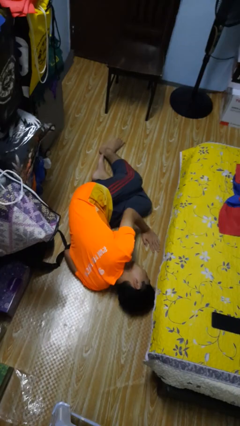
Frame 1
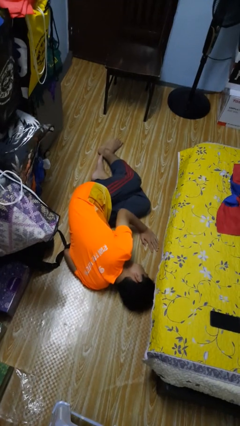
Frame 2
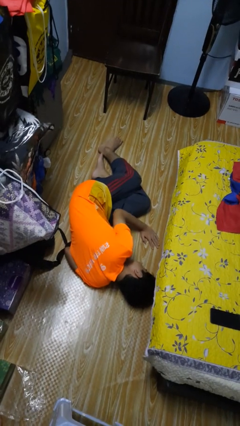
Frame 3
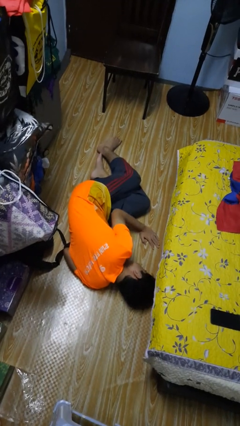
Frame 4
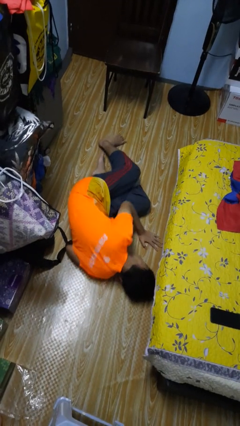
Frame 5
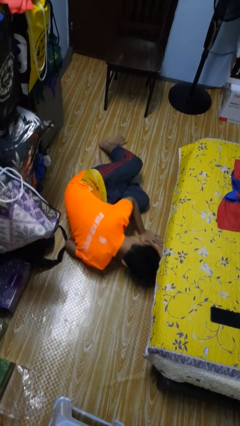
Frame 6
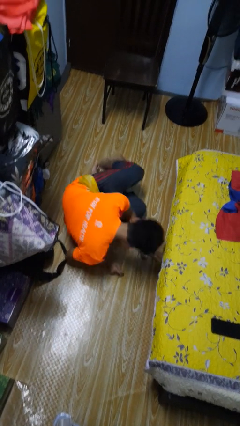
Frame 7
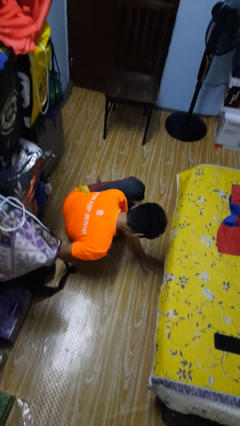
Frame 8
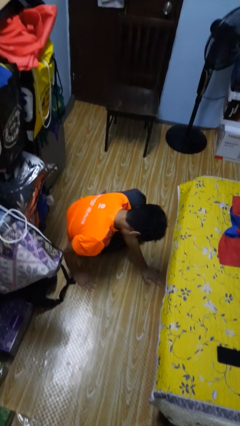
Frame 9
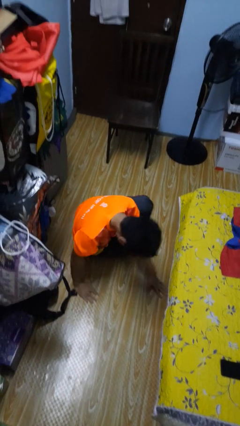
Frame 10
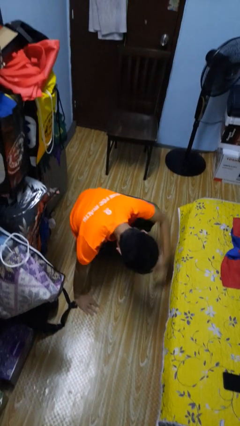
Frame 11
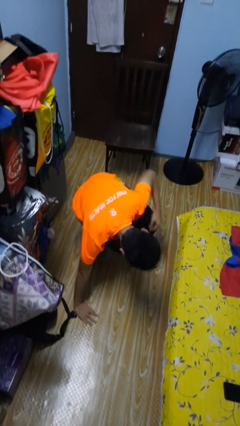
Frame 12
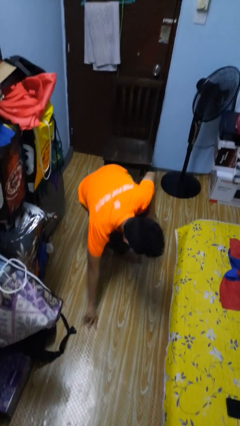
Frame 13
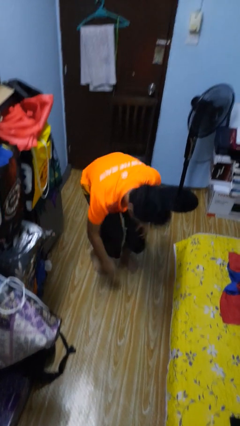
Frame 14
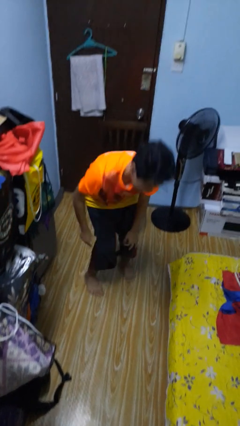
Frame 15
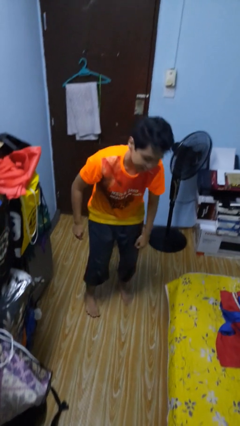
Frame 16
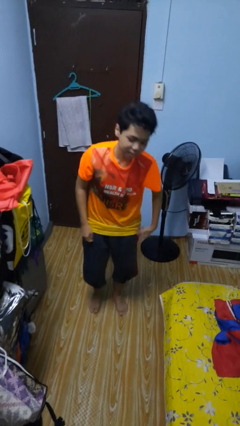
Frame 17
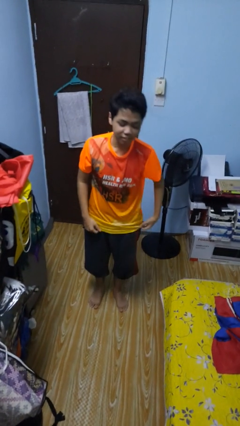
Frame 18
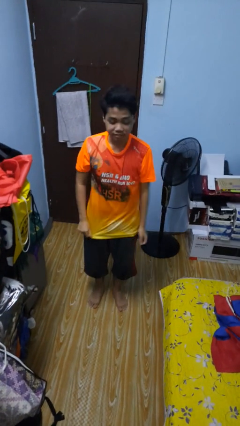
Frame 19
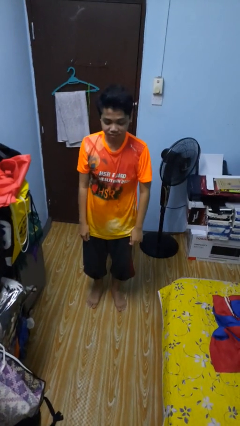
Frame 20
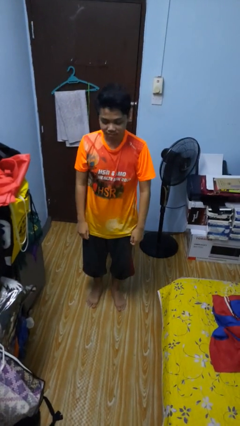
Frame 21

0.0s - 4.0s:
person stands up from floor

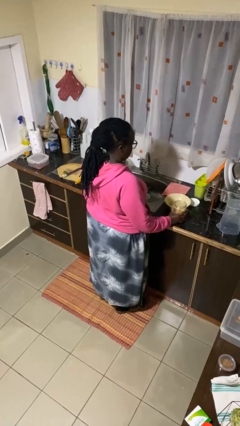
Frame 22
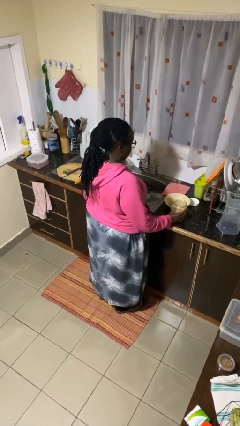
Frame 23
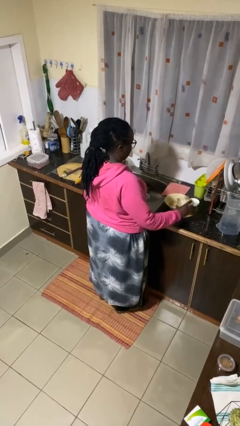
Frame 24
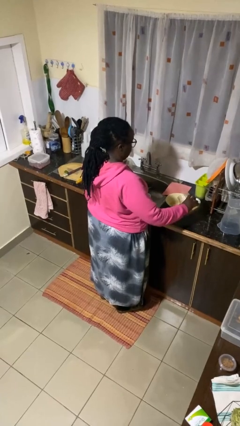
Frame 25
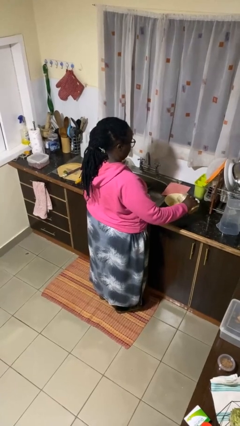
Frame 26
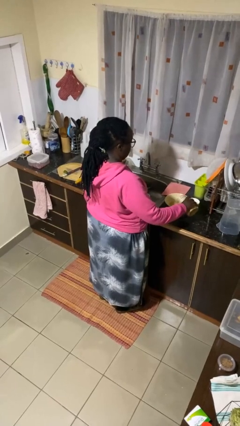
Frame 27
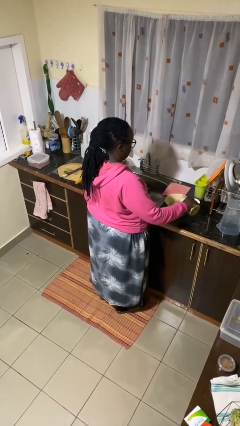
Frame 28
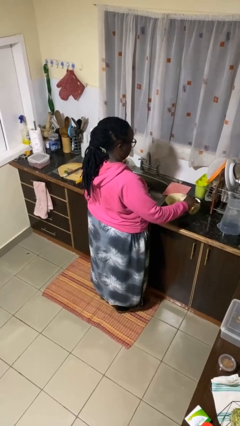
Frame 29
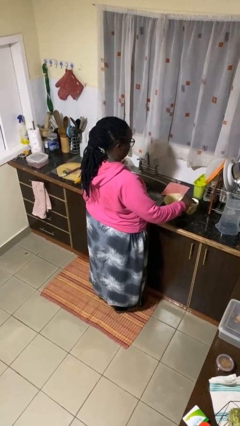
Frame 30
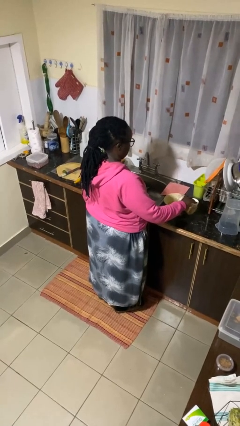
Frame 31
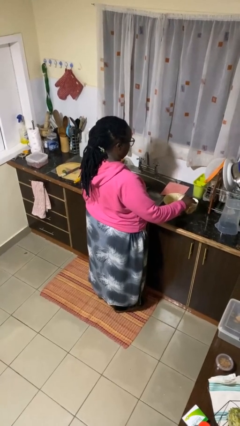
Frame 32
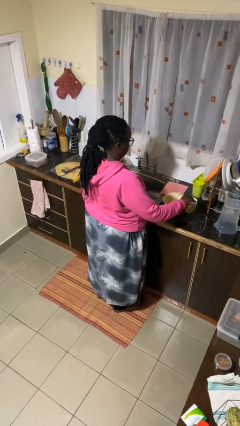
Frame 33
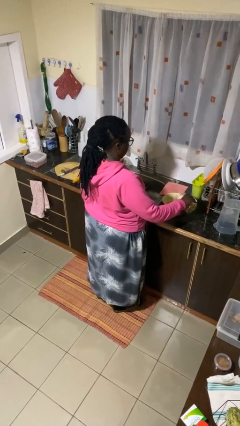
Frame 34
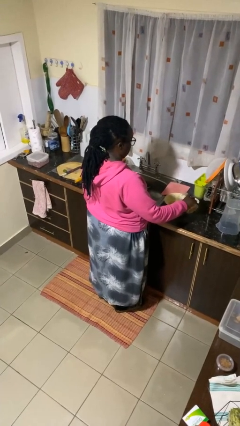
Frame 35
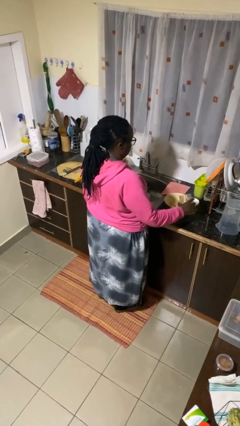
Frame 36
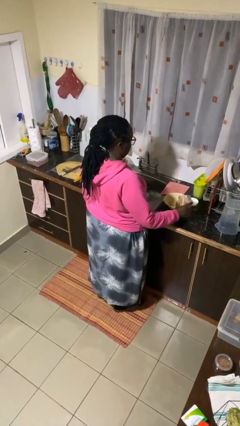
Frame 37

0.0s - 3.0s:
person pours into bowl

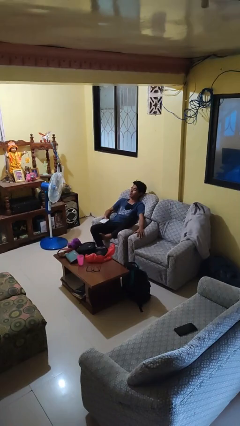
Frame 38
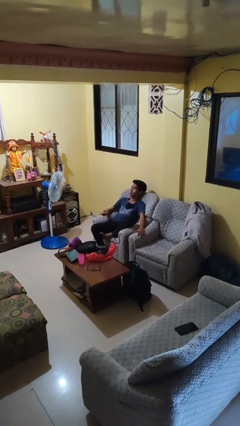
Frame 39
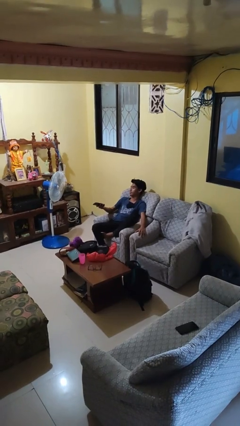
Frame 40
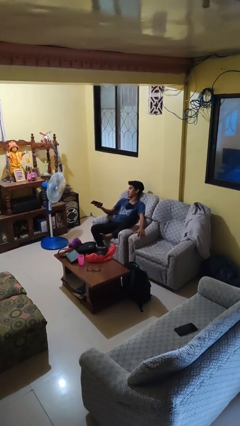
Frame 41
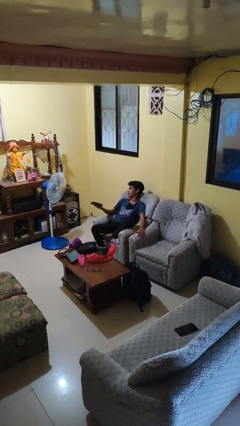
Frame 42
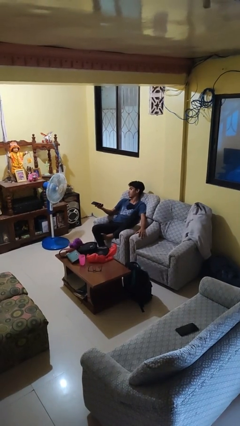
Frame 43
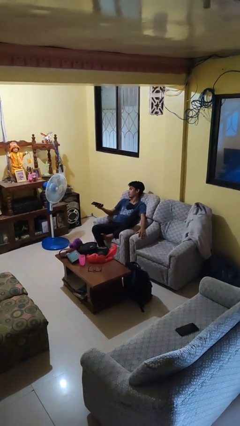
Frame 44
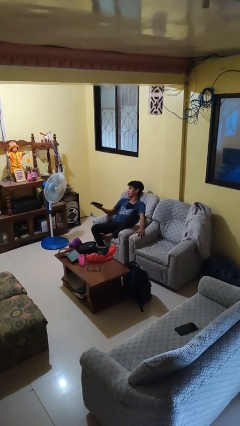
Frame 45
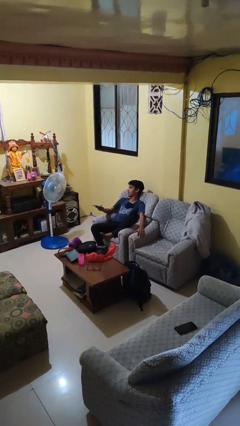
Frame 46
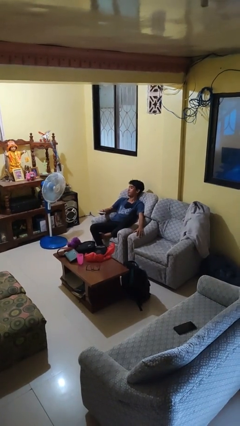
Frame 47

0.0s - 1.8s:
person uses television remote

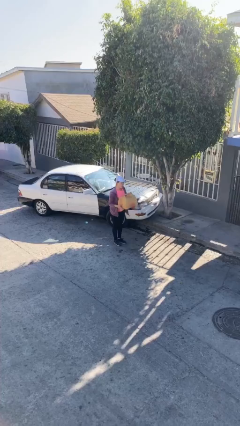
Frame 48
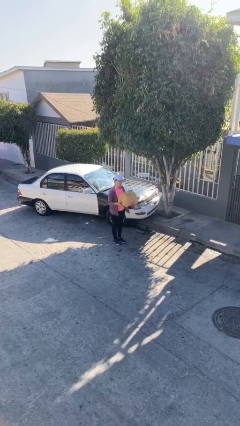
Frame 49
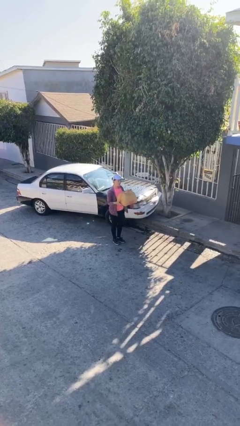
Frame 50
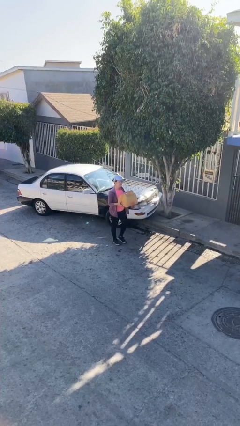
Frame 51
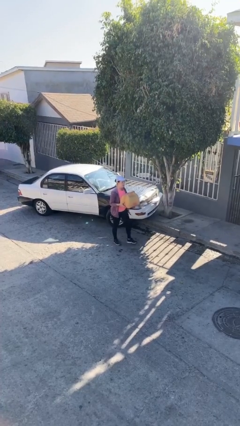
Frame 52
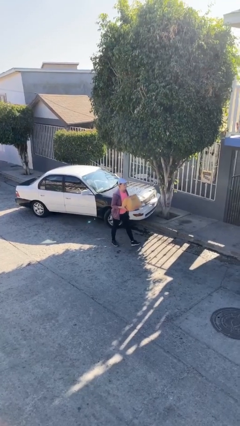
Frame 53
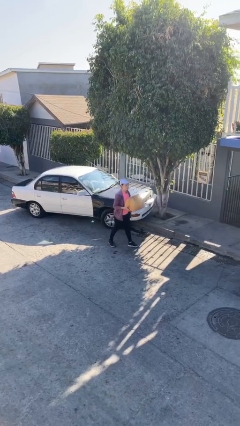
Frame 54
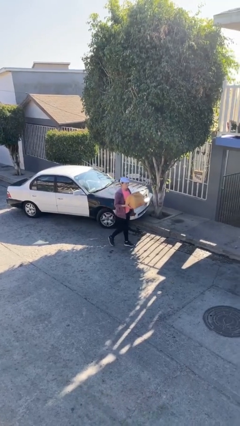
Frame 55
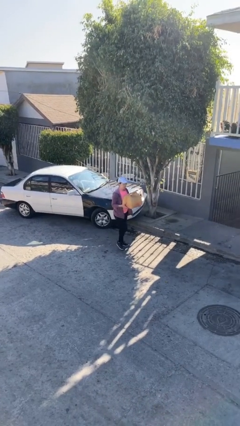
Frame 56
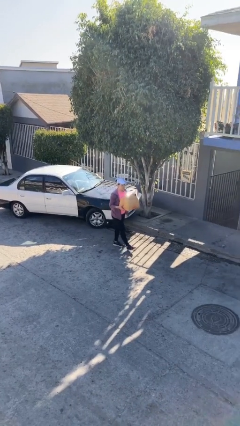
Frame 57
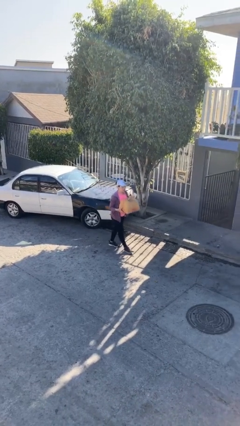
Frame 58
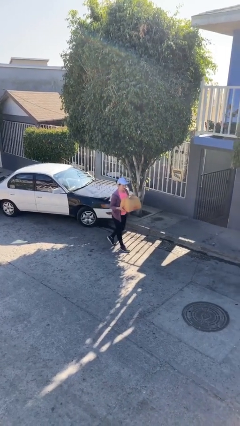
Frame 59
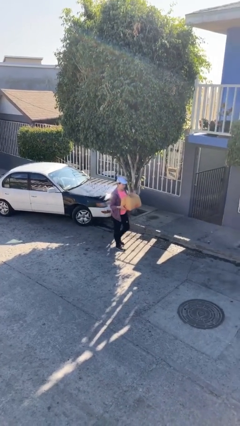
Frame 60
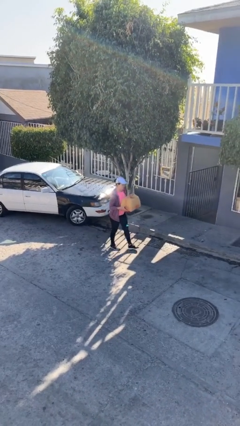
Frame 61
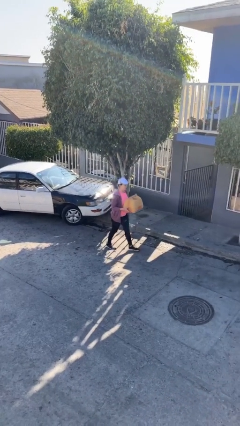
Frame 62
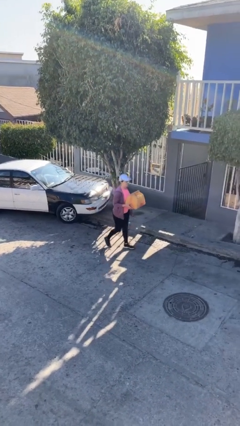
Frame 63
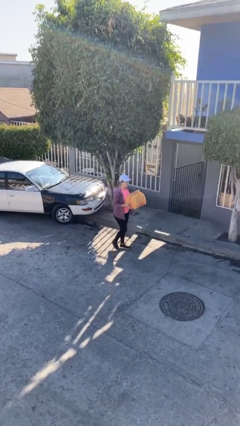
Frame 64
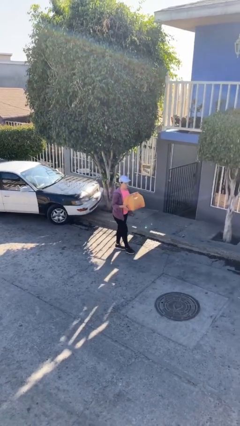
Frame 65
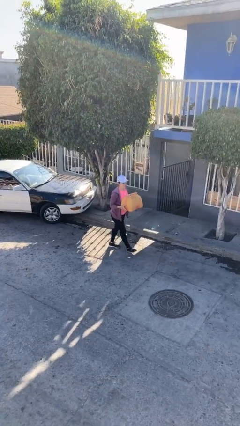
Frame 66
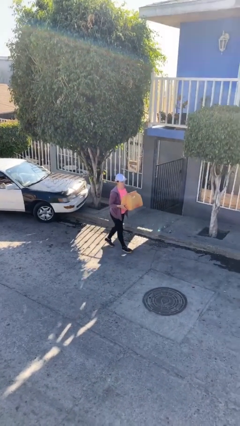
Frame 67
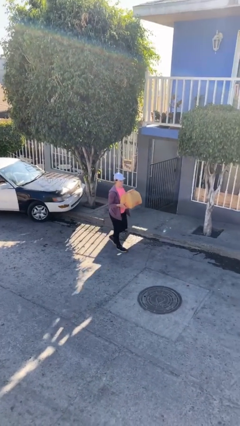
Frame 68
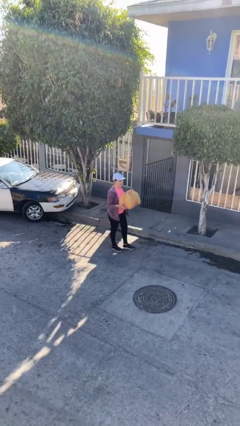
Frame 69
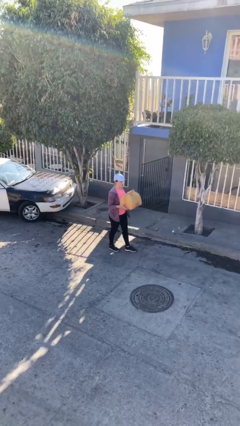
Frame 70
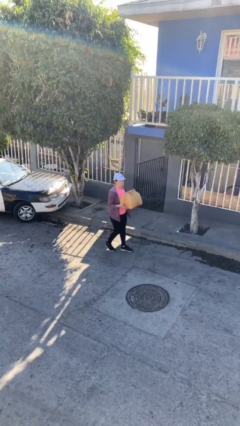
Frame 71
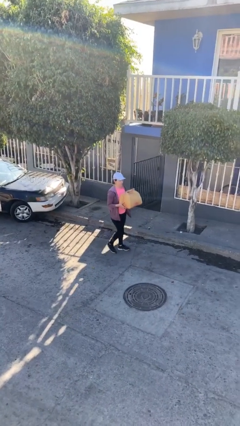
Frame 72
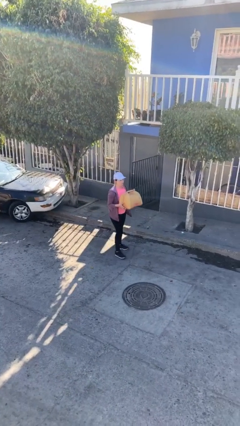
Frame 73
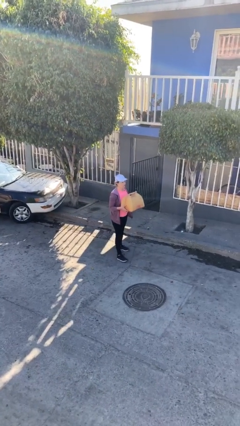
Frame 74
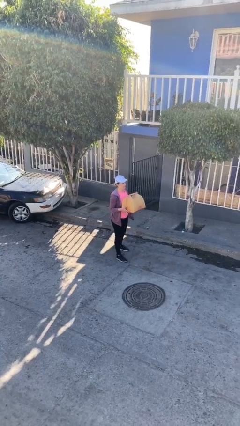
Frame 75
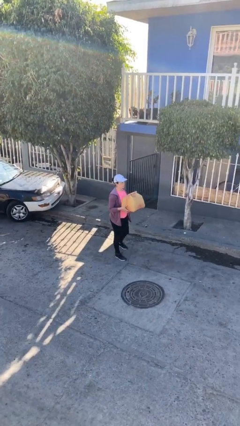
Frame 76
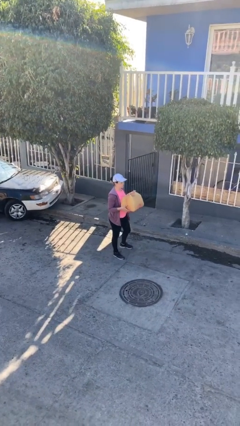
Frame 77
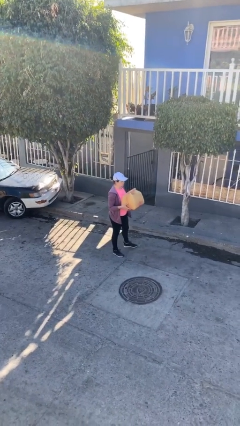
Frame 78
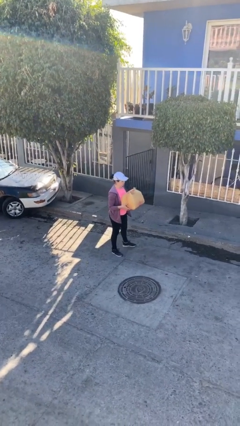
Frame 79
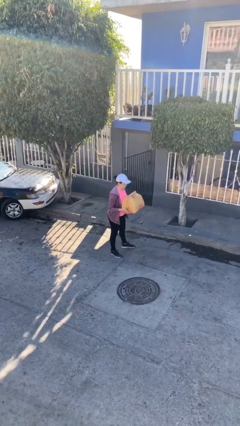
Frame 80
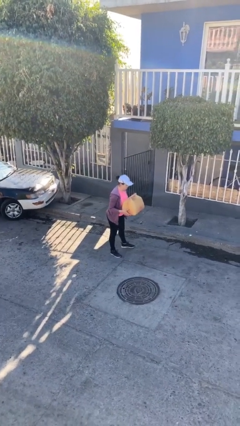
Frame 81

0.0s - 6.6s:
person carries heavy object

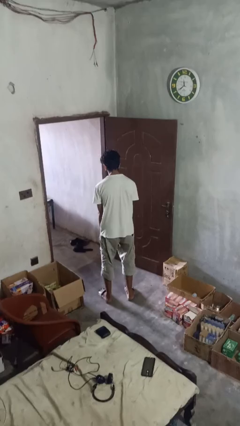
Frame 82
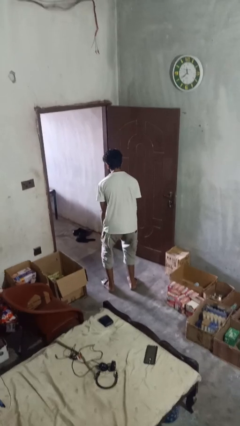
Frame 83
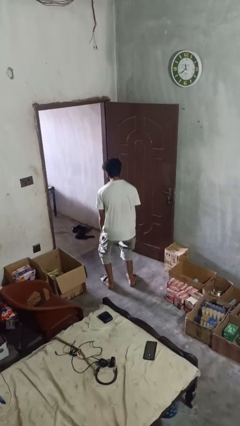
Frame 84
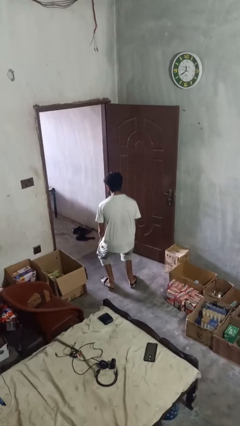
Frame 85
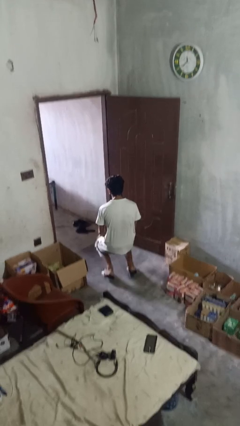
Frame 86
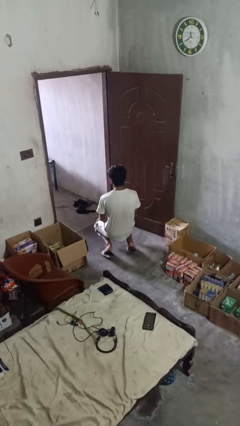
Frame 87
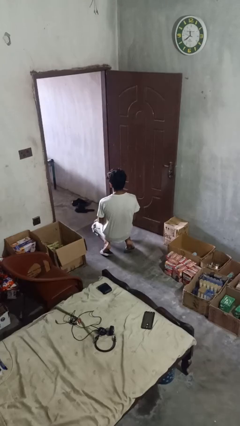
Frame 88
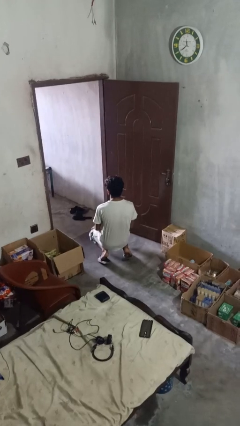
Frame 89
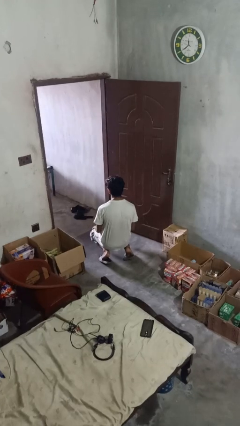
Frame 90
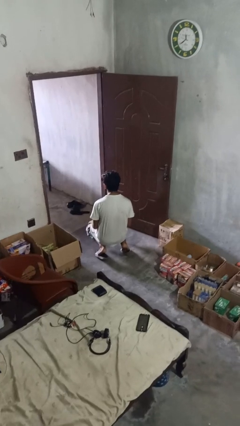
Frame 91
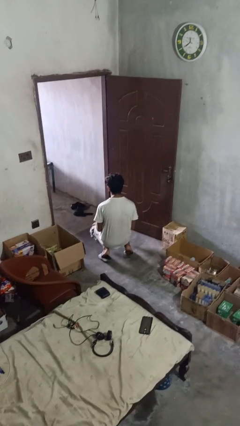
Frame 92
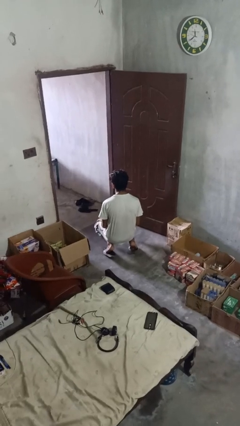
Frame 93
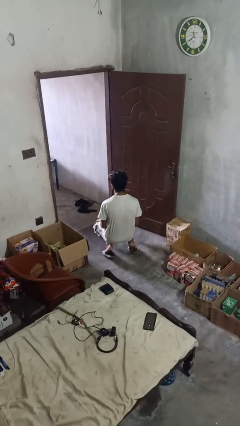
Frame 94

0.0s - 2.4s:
person kneels
